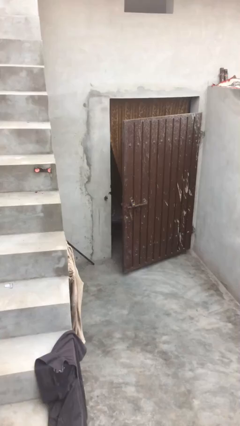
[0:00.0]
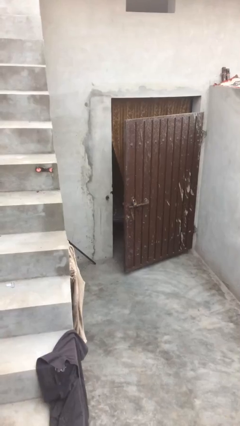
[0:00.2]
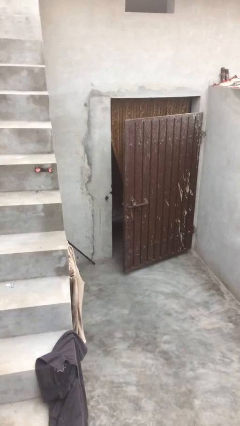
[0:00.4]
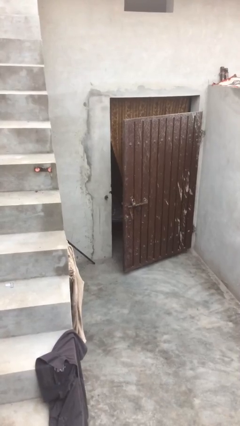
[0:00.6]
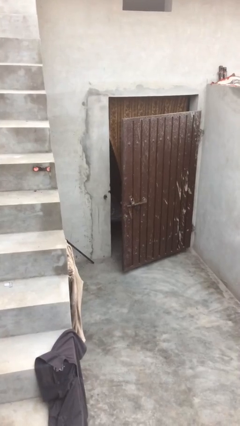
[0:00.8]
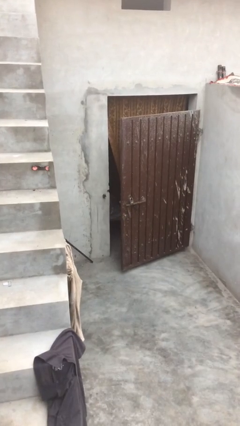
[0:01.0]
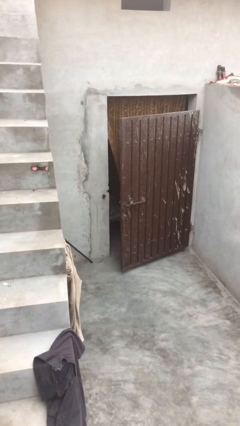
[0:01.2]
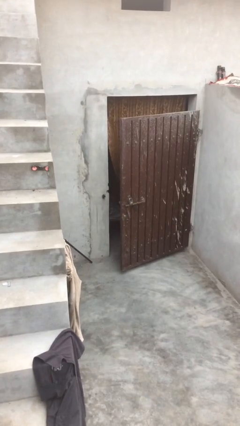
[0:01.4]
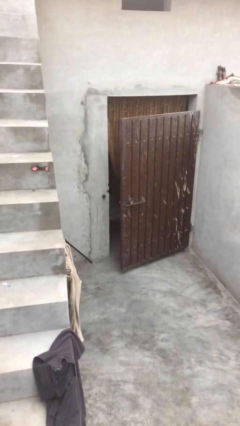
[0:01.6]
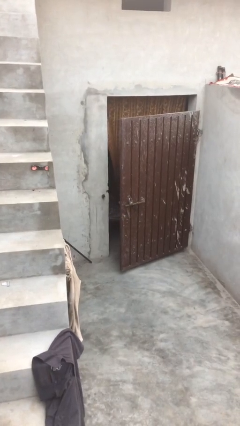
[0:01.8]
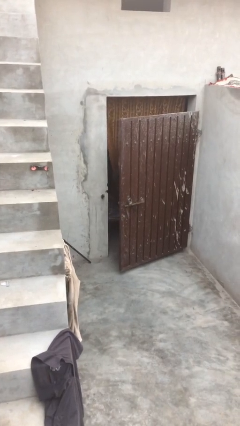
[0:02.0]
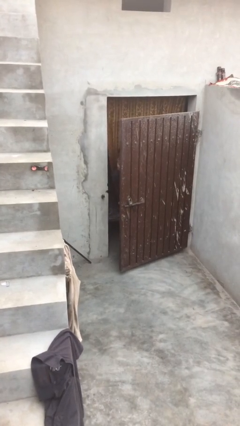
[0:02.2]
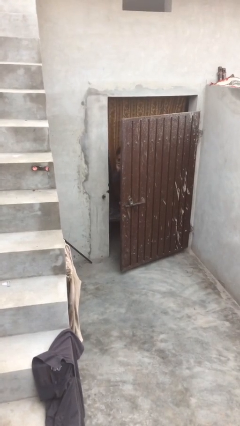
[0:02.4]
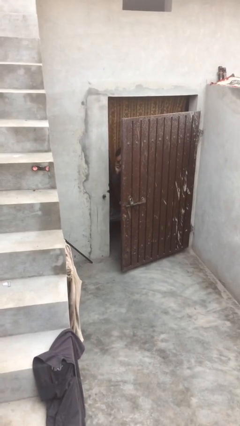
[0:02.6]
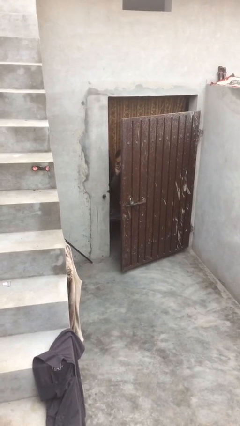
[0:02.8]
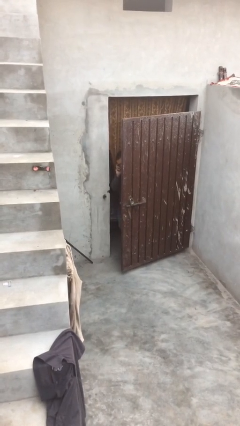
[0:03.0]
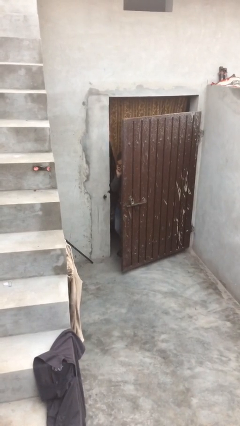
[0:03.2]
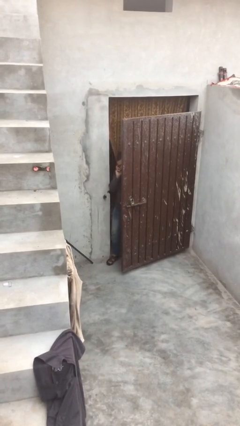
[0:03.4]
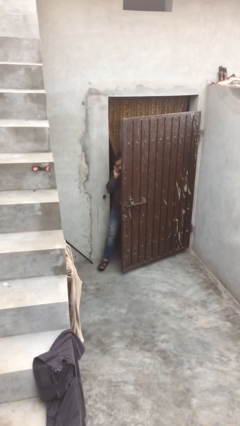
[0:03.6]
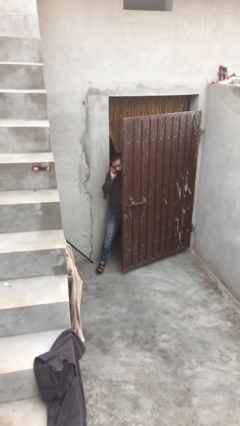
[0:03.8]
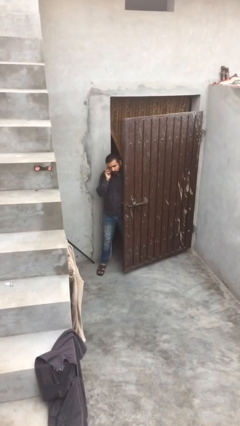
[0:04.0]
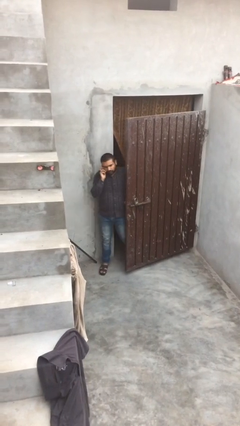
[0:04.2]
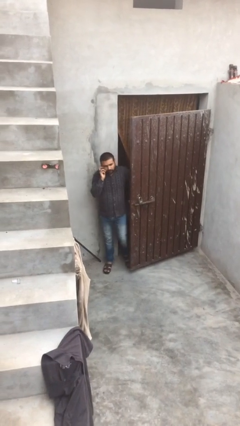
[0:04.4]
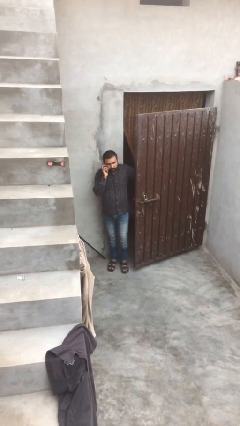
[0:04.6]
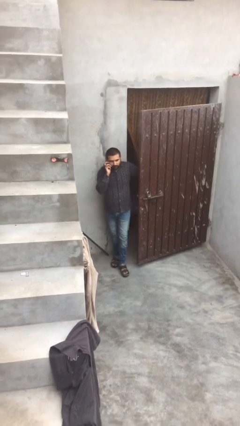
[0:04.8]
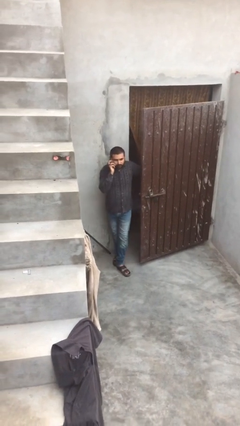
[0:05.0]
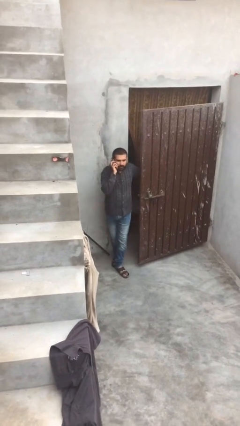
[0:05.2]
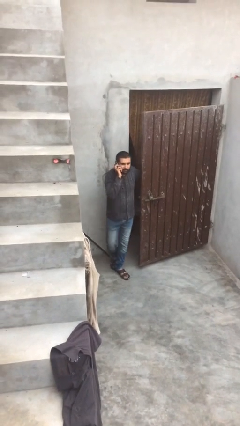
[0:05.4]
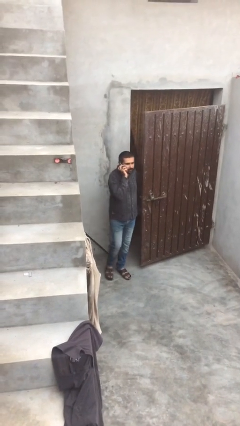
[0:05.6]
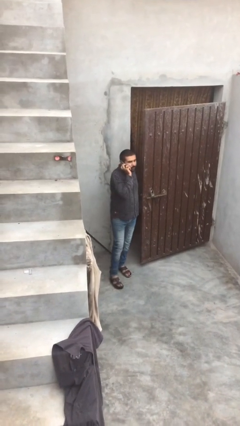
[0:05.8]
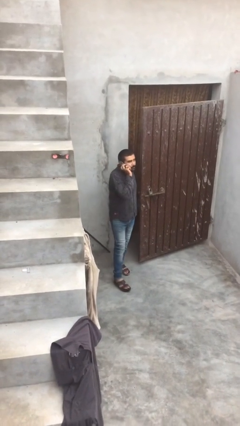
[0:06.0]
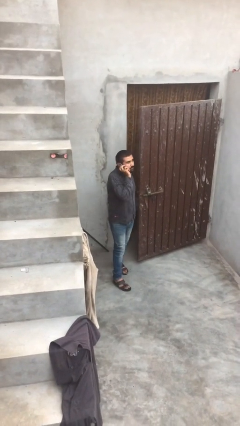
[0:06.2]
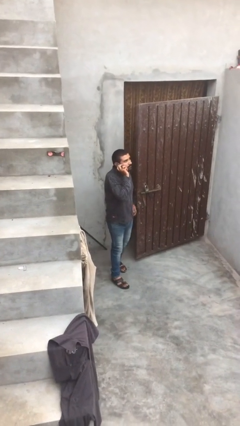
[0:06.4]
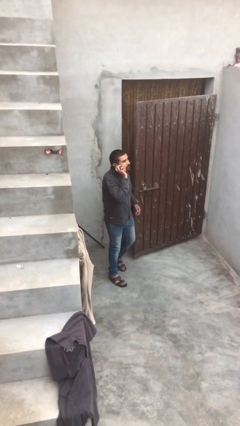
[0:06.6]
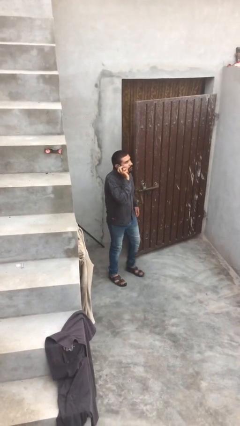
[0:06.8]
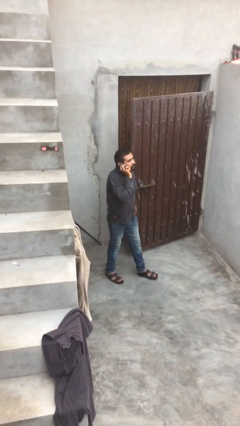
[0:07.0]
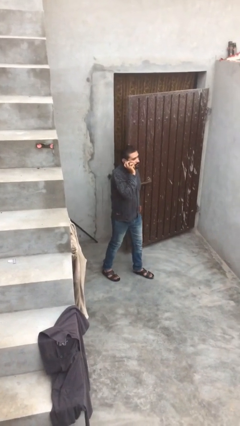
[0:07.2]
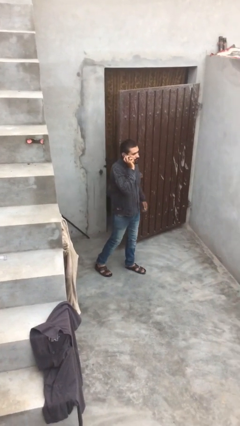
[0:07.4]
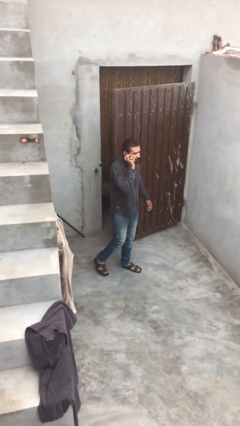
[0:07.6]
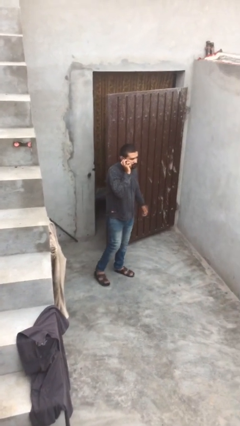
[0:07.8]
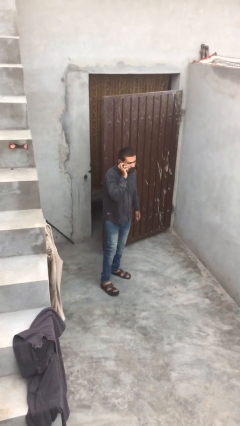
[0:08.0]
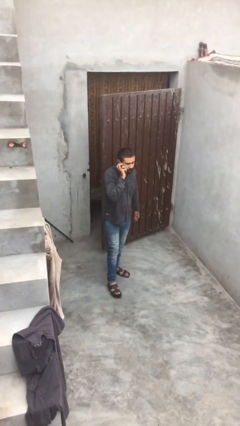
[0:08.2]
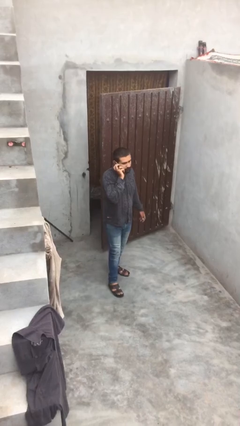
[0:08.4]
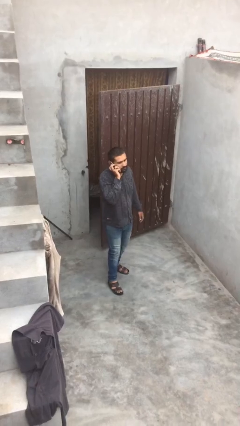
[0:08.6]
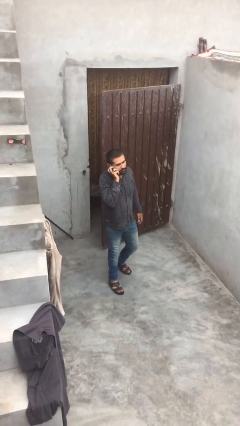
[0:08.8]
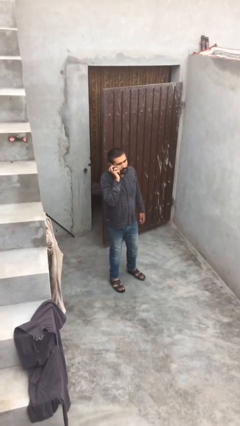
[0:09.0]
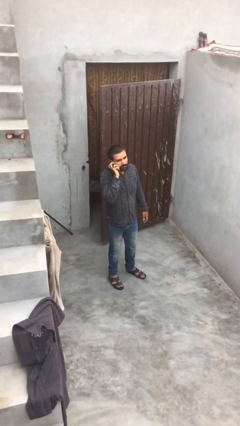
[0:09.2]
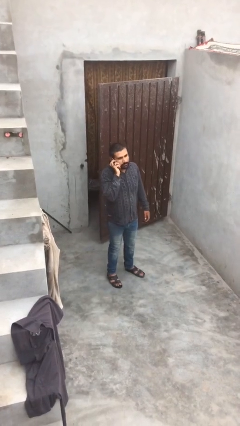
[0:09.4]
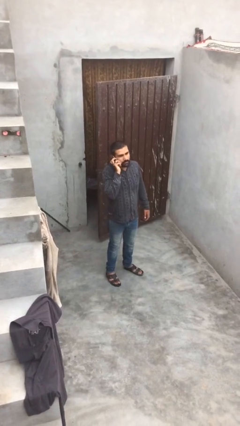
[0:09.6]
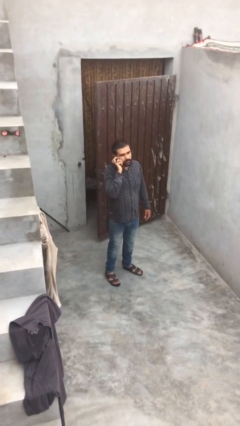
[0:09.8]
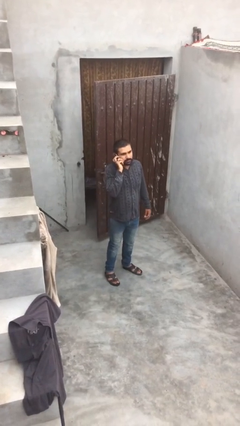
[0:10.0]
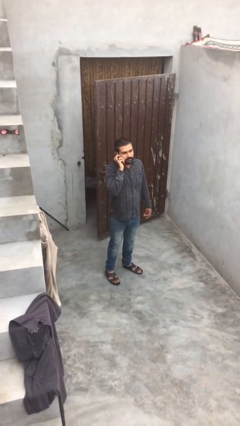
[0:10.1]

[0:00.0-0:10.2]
person enters scene through structure

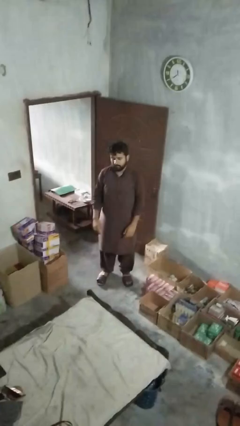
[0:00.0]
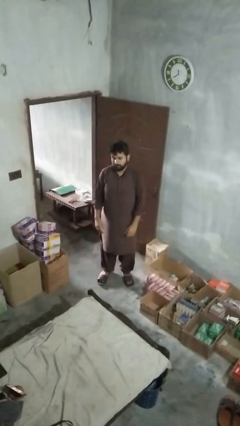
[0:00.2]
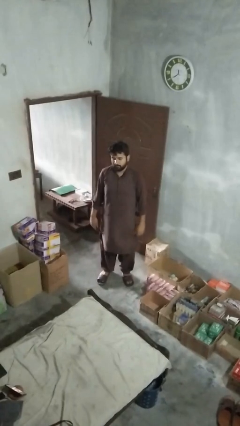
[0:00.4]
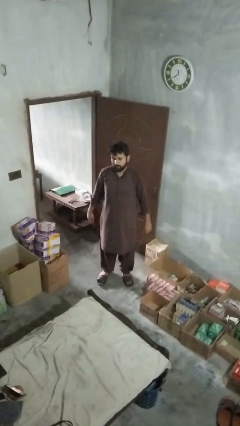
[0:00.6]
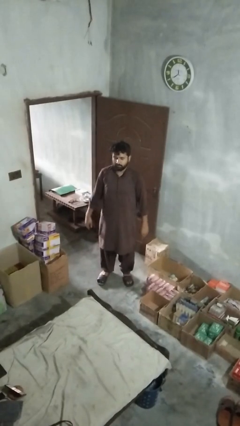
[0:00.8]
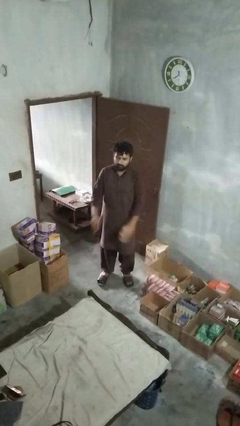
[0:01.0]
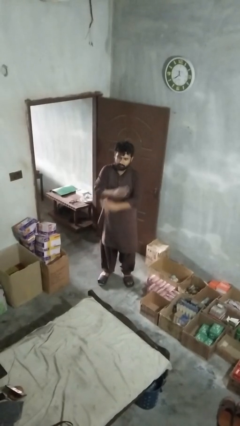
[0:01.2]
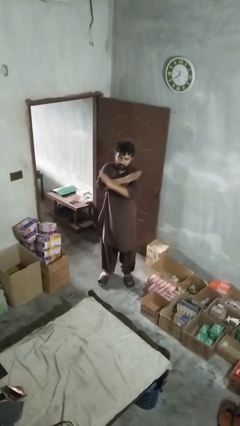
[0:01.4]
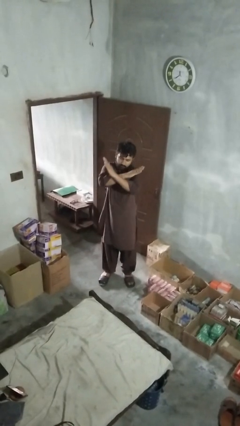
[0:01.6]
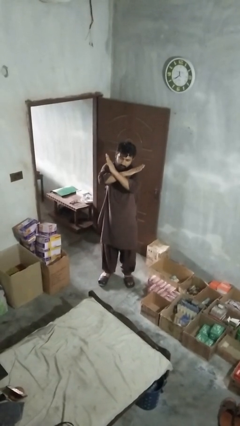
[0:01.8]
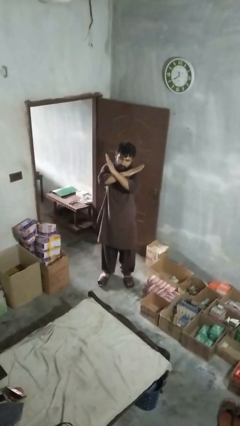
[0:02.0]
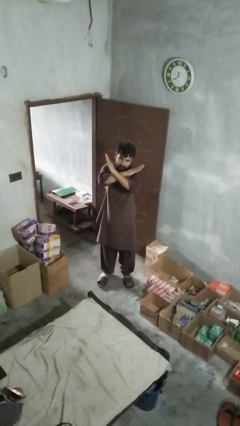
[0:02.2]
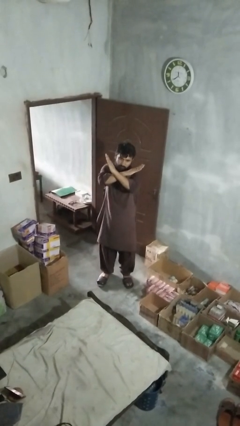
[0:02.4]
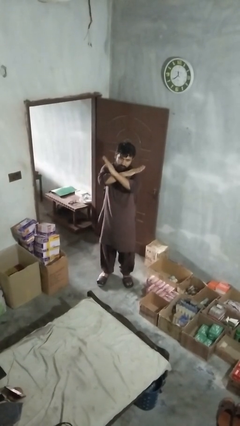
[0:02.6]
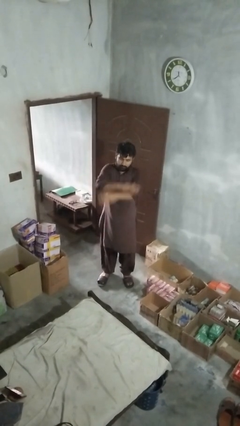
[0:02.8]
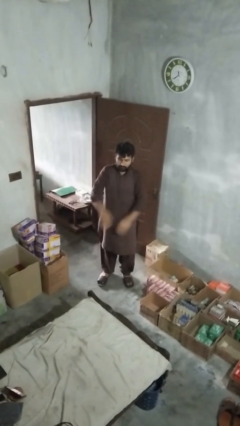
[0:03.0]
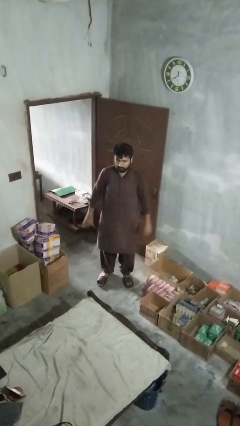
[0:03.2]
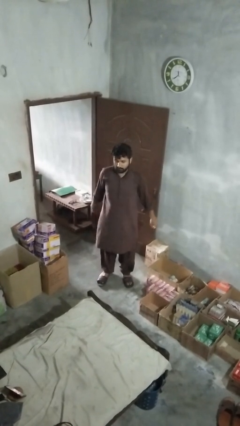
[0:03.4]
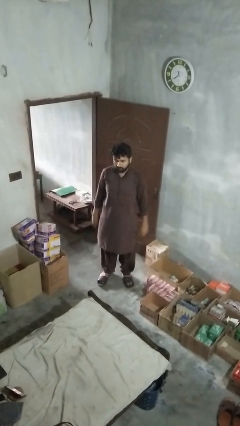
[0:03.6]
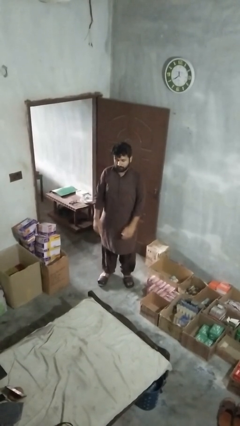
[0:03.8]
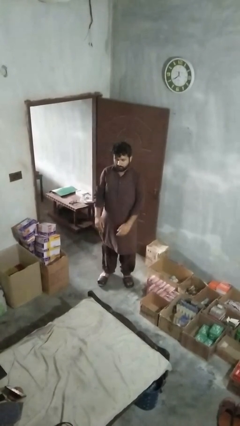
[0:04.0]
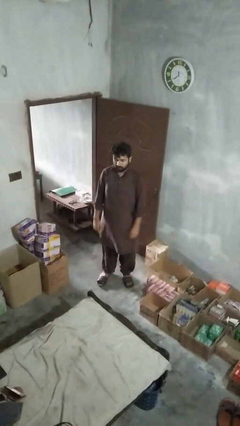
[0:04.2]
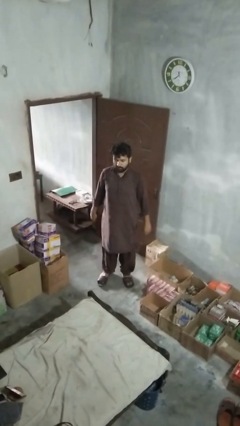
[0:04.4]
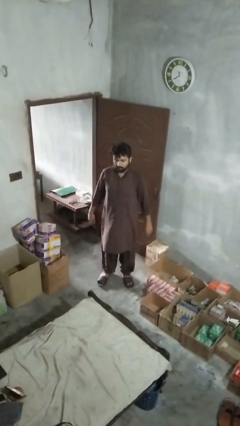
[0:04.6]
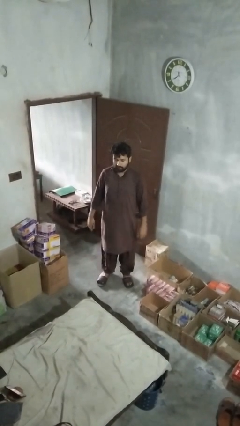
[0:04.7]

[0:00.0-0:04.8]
person gestures arms x

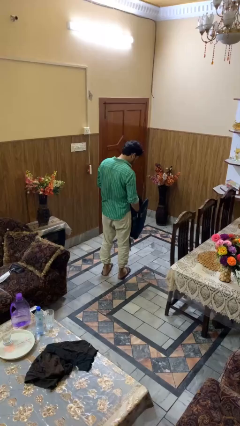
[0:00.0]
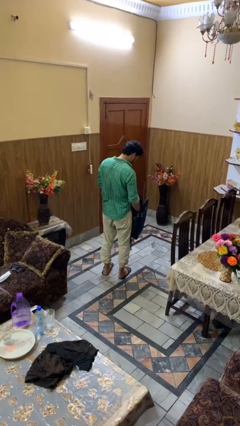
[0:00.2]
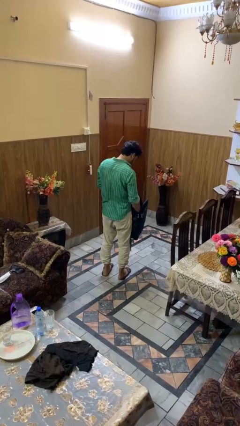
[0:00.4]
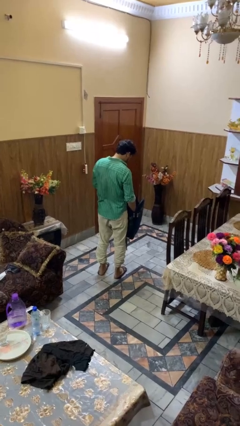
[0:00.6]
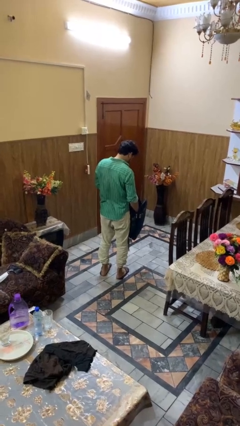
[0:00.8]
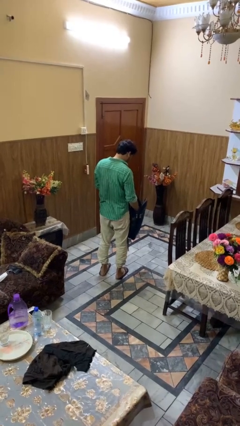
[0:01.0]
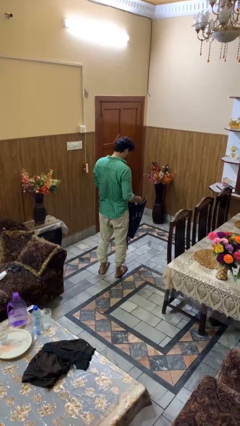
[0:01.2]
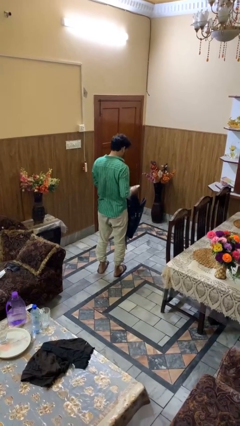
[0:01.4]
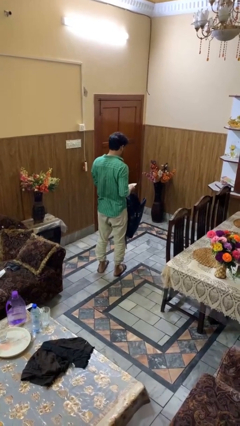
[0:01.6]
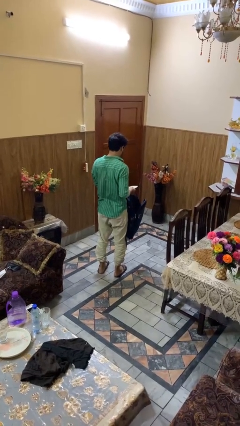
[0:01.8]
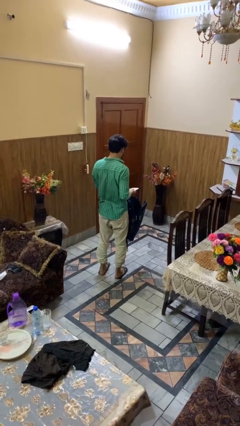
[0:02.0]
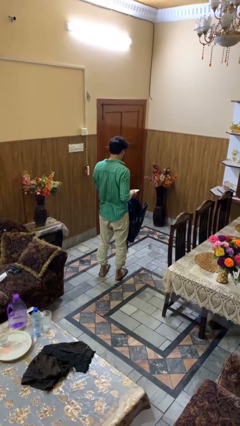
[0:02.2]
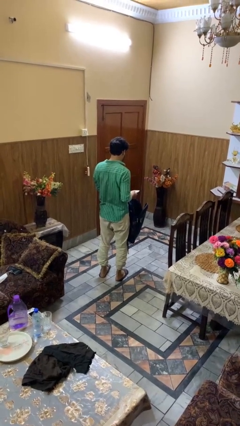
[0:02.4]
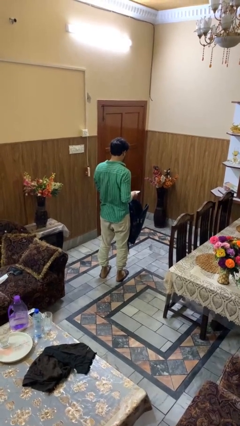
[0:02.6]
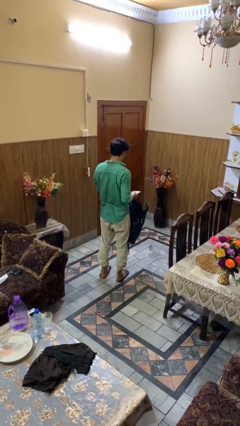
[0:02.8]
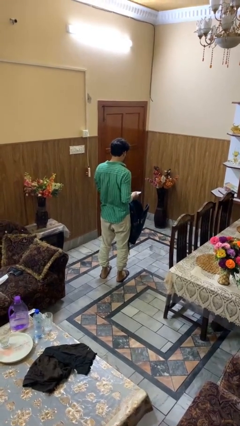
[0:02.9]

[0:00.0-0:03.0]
person takes object from backpack
